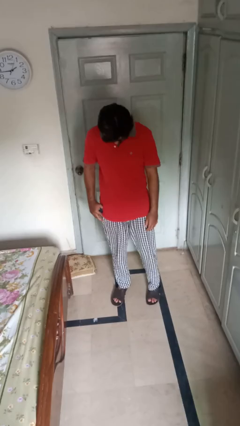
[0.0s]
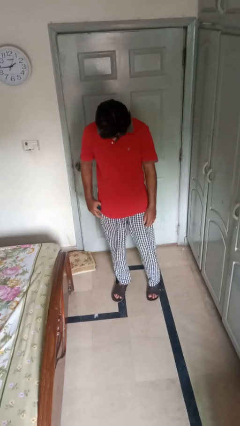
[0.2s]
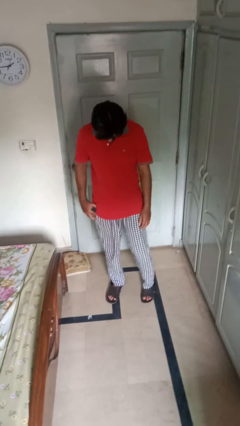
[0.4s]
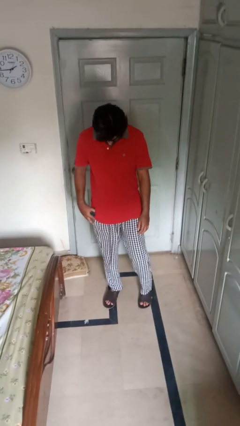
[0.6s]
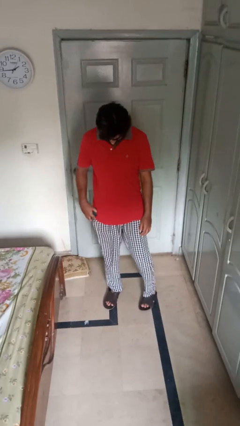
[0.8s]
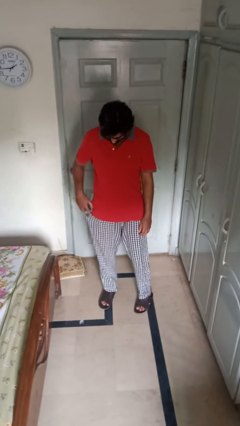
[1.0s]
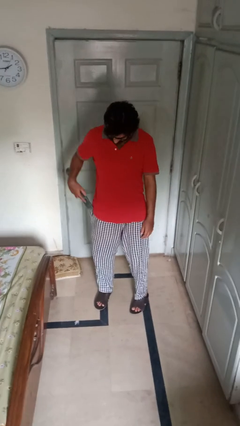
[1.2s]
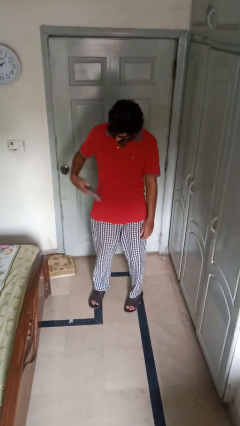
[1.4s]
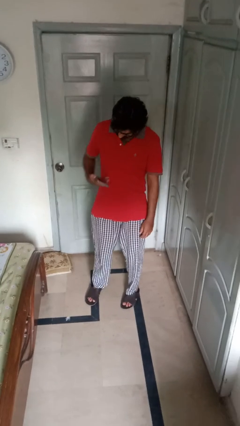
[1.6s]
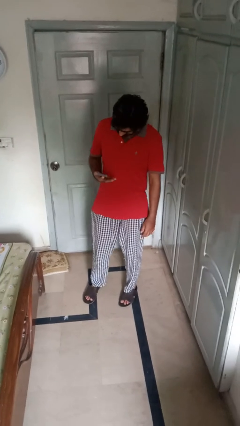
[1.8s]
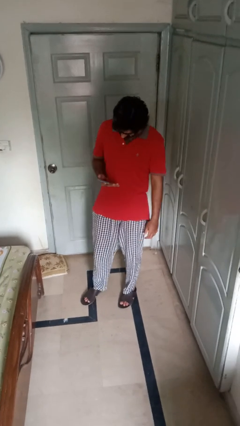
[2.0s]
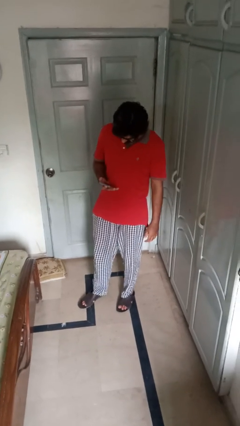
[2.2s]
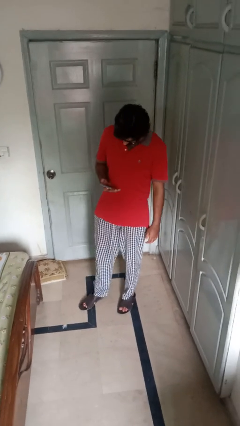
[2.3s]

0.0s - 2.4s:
person takes phone from pocket

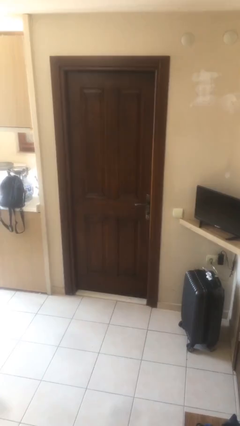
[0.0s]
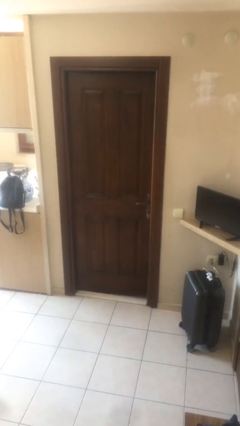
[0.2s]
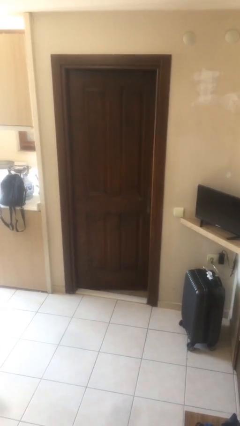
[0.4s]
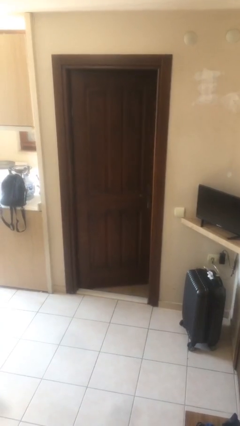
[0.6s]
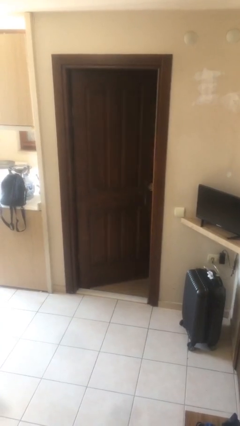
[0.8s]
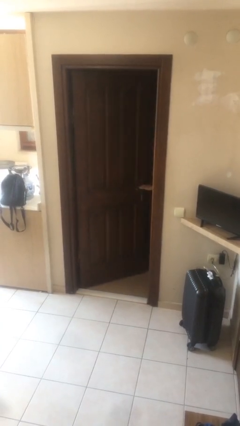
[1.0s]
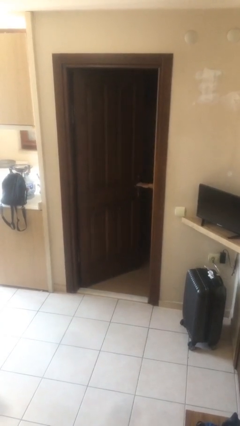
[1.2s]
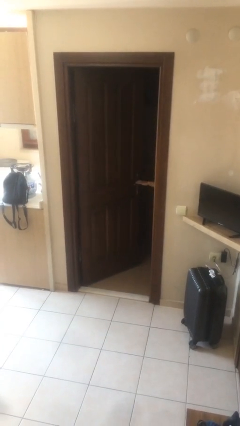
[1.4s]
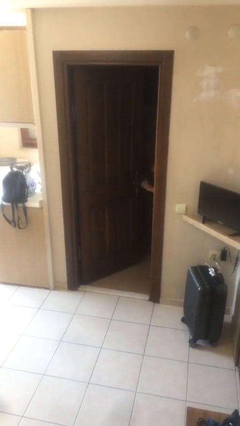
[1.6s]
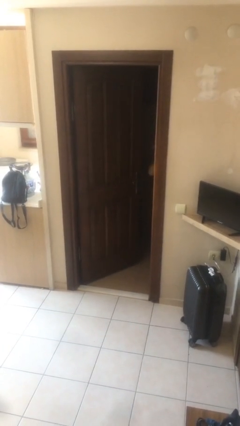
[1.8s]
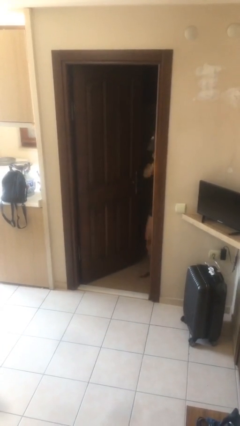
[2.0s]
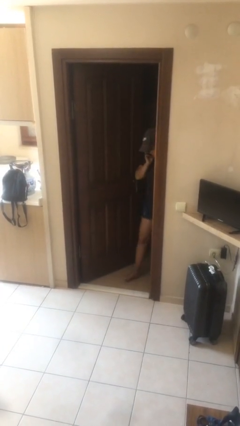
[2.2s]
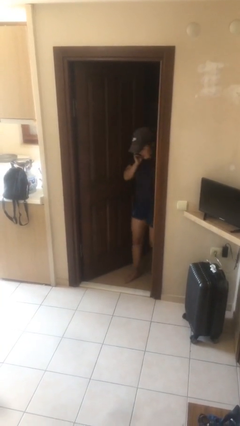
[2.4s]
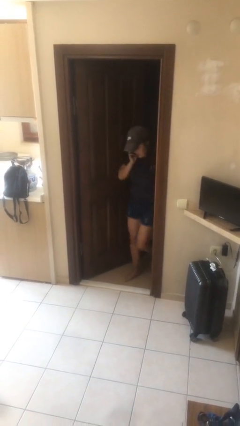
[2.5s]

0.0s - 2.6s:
person opens facility door

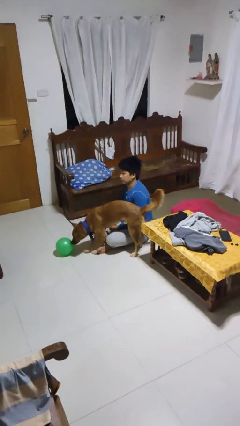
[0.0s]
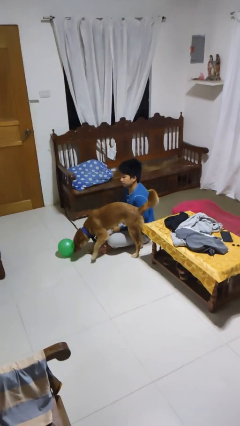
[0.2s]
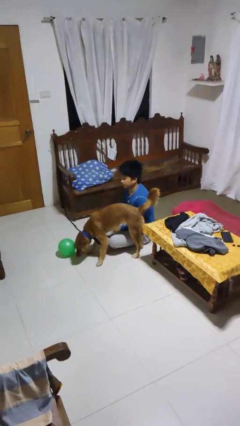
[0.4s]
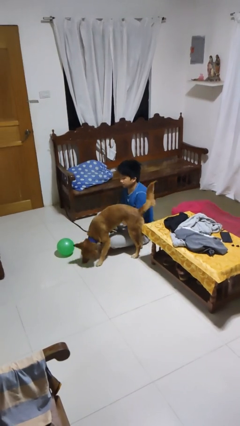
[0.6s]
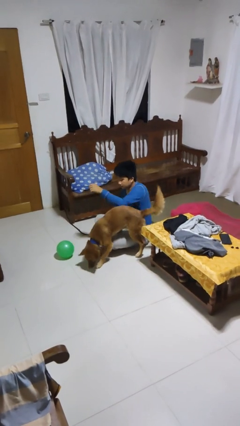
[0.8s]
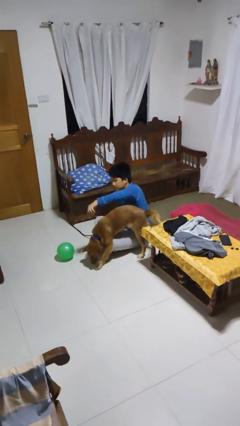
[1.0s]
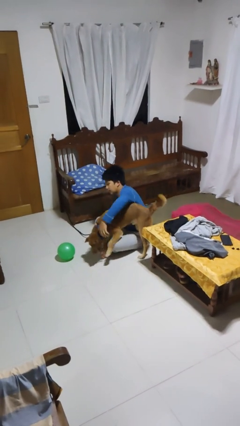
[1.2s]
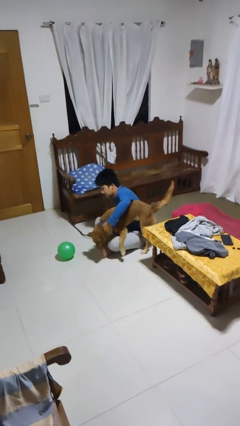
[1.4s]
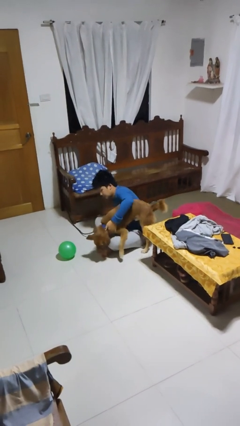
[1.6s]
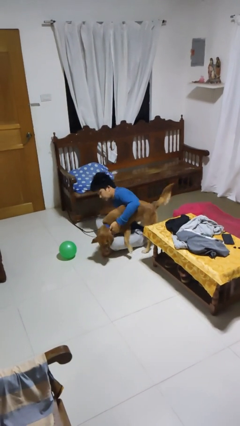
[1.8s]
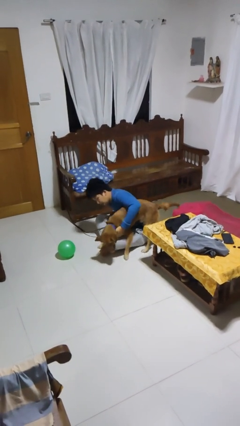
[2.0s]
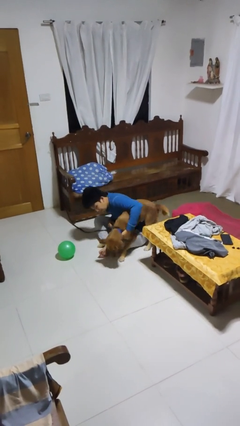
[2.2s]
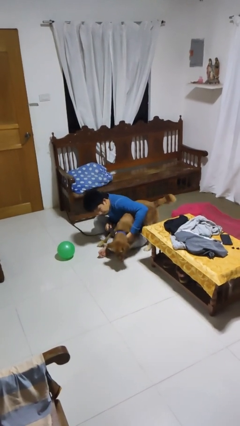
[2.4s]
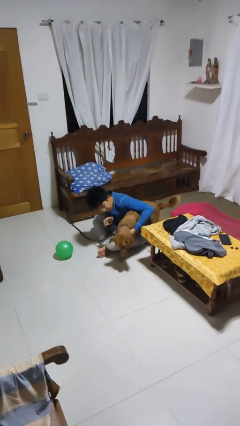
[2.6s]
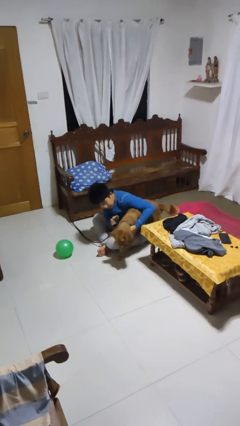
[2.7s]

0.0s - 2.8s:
person hugs dog

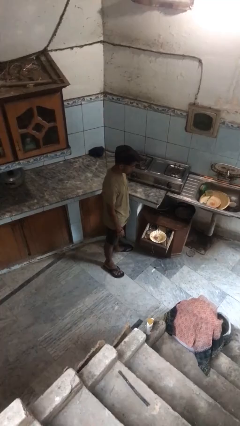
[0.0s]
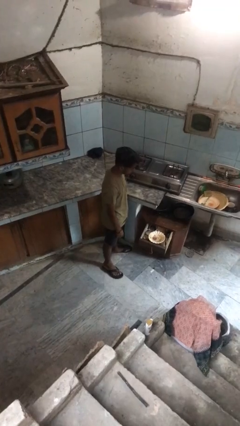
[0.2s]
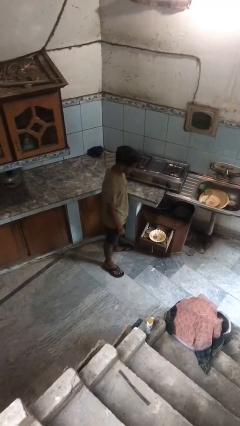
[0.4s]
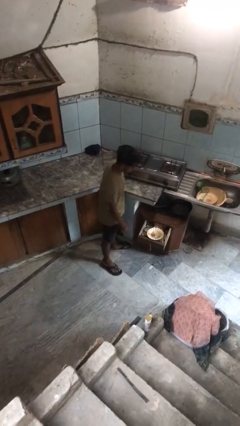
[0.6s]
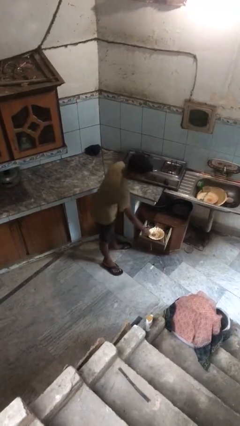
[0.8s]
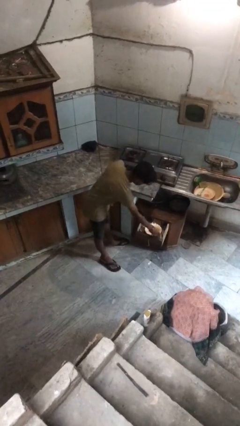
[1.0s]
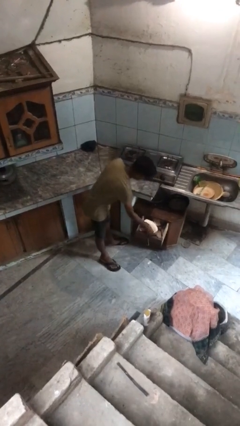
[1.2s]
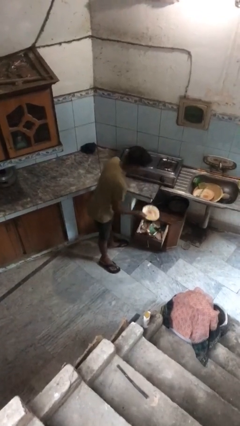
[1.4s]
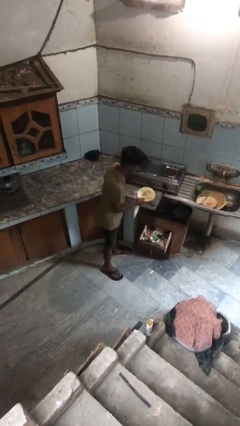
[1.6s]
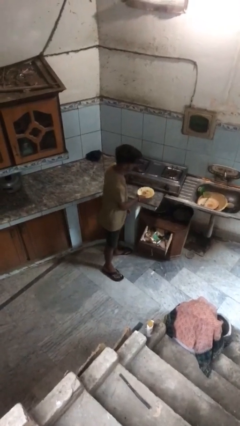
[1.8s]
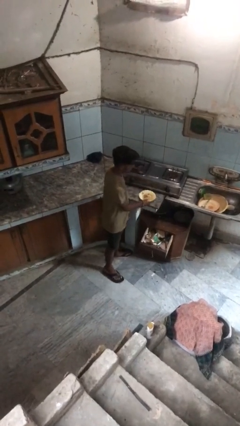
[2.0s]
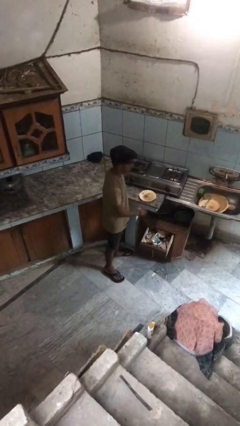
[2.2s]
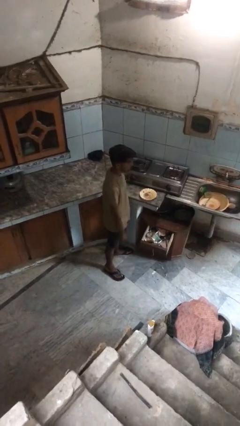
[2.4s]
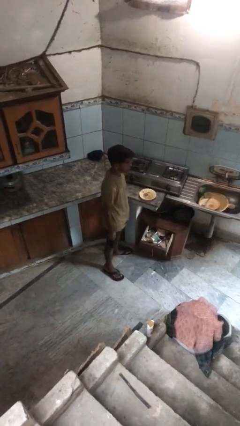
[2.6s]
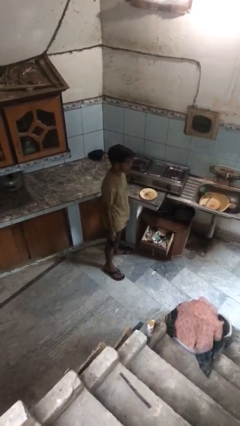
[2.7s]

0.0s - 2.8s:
person takes object from kitchen drawer

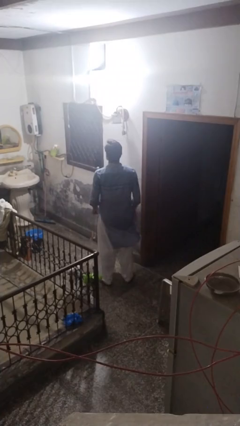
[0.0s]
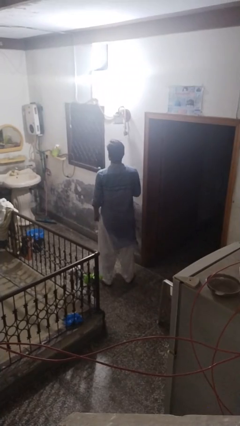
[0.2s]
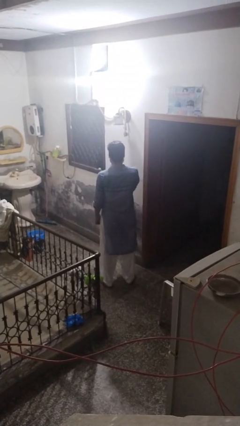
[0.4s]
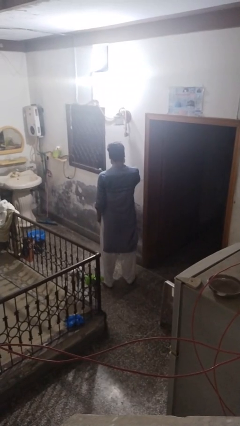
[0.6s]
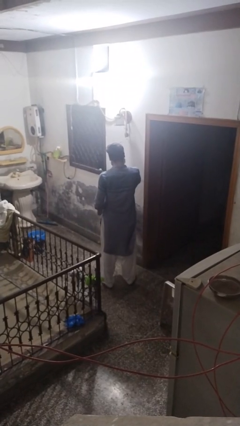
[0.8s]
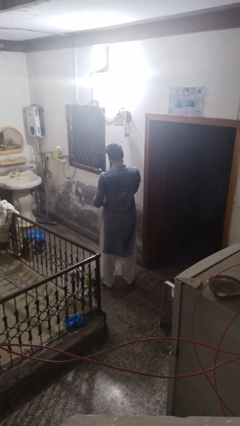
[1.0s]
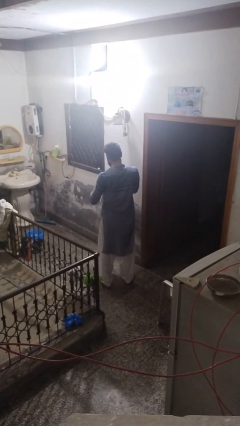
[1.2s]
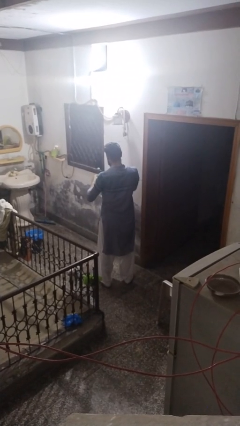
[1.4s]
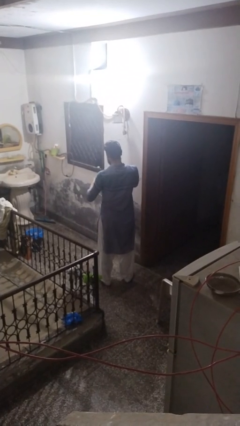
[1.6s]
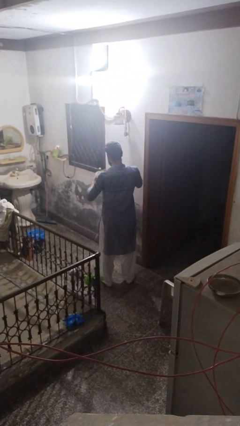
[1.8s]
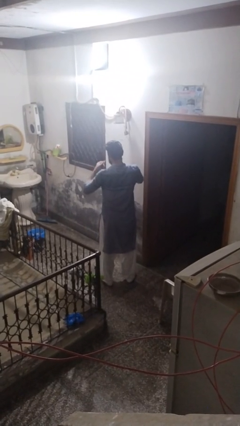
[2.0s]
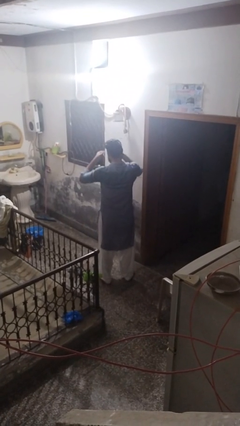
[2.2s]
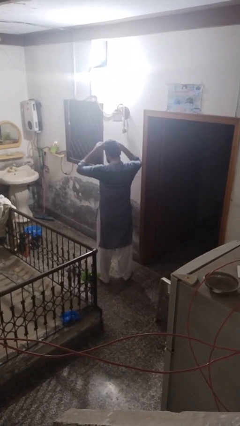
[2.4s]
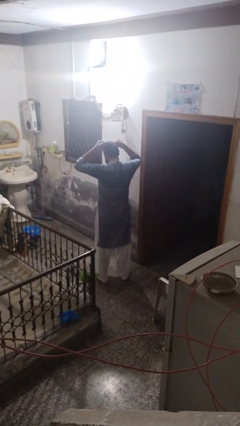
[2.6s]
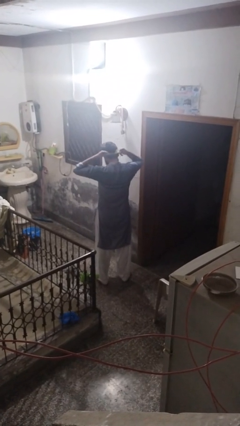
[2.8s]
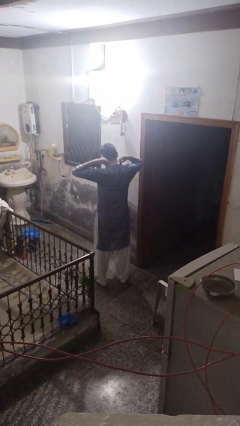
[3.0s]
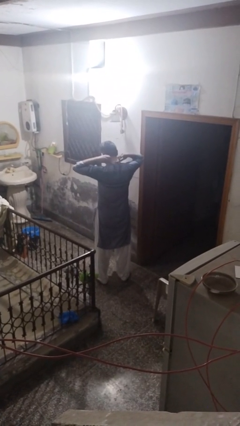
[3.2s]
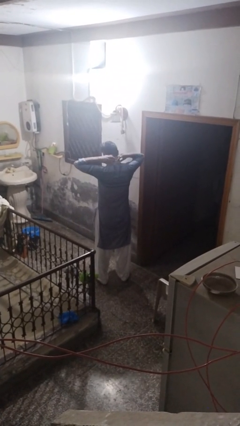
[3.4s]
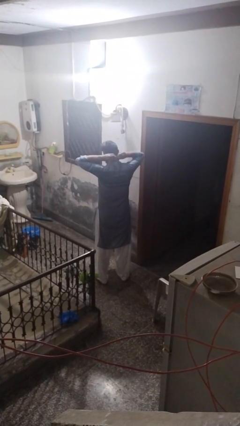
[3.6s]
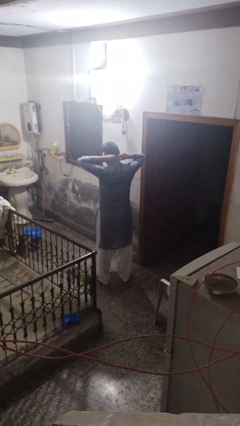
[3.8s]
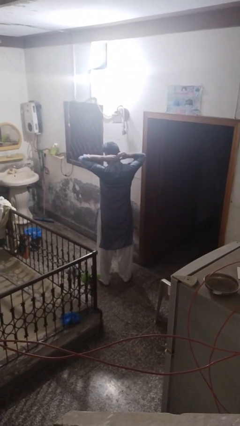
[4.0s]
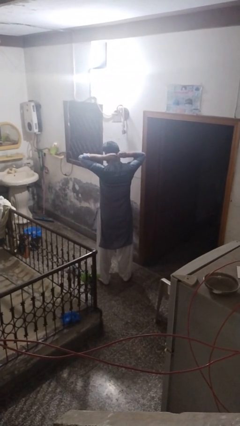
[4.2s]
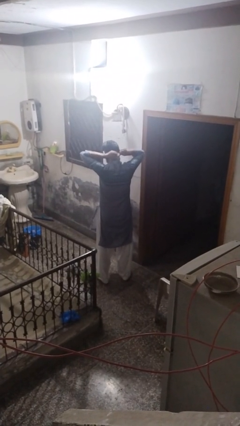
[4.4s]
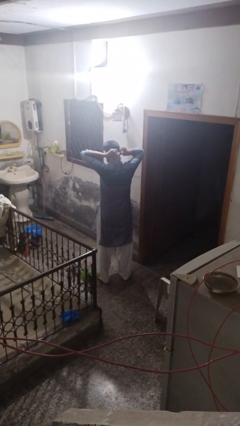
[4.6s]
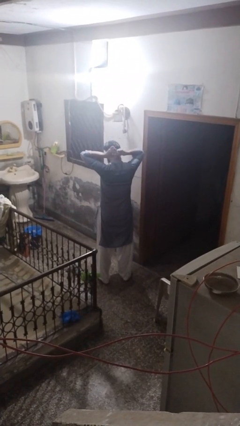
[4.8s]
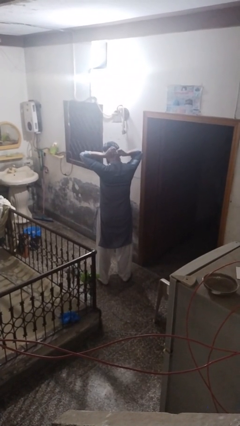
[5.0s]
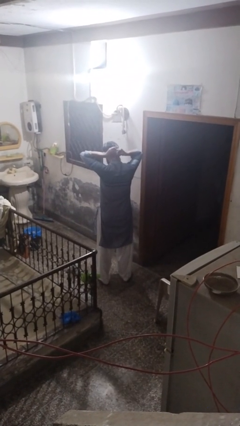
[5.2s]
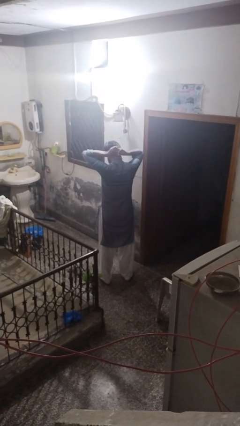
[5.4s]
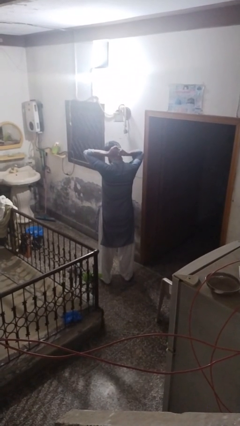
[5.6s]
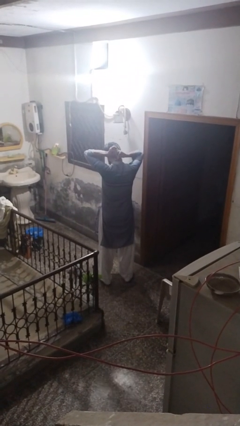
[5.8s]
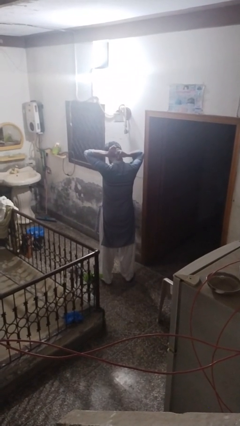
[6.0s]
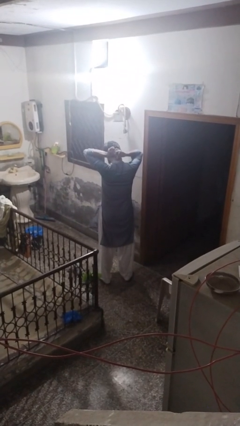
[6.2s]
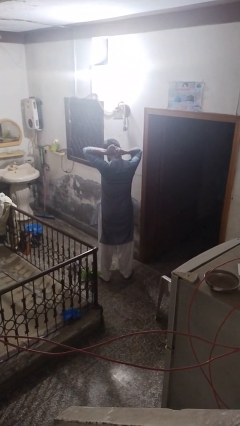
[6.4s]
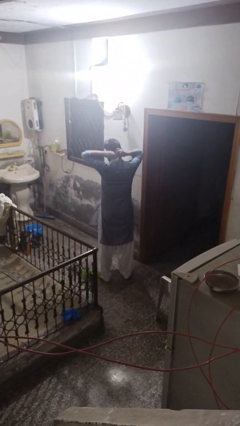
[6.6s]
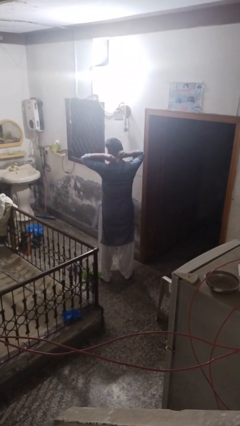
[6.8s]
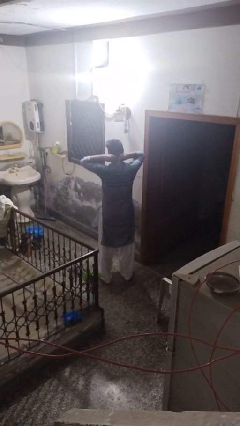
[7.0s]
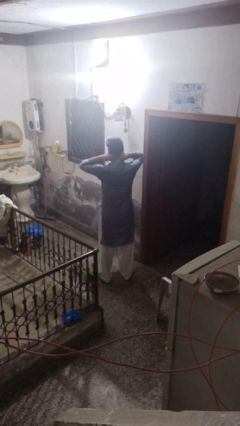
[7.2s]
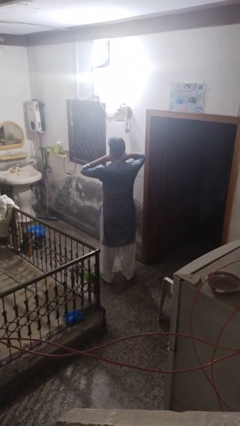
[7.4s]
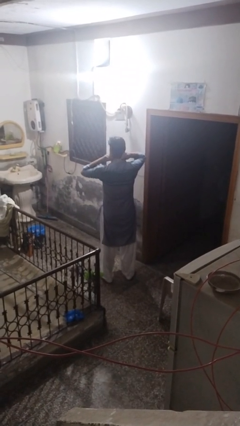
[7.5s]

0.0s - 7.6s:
person puts on necklace
